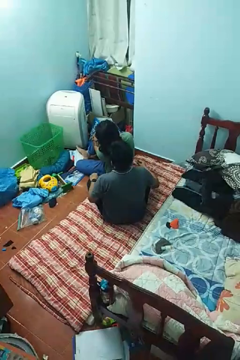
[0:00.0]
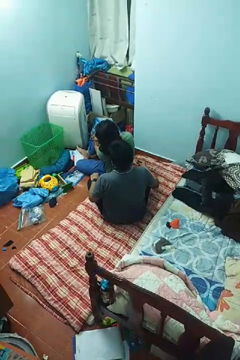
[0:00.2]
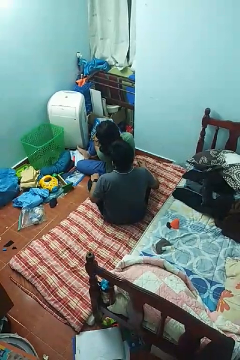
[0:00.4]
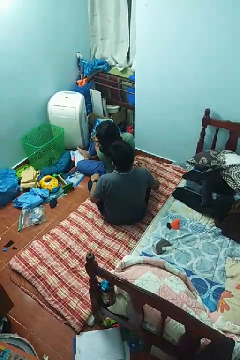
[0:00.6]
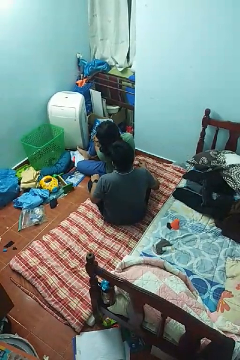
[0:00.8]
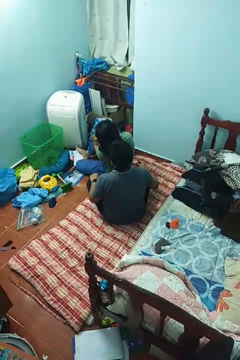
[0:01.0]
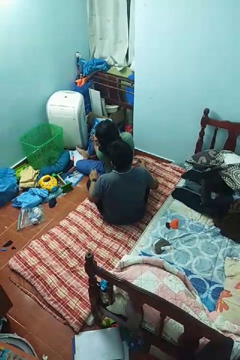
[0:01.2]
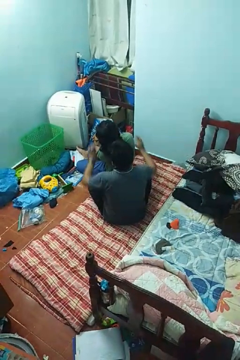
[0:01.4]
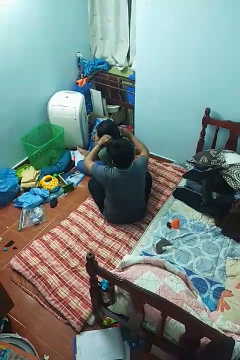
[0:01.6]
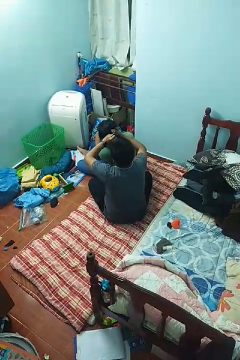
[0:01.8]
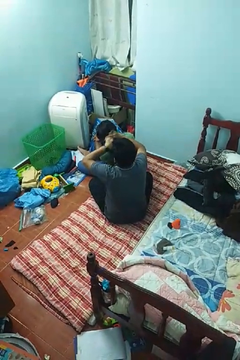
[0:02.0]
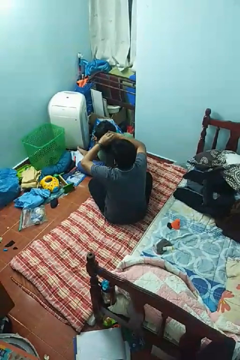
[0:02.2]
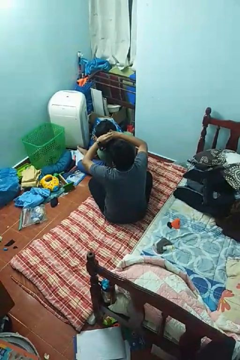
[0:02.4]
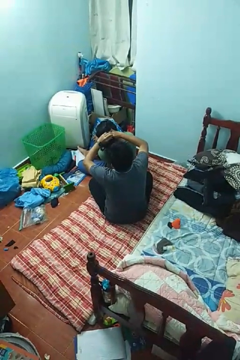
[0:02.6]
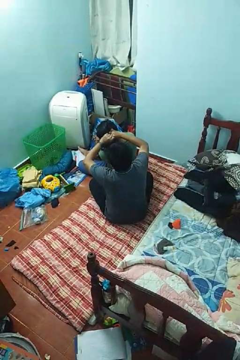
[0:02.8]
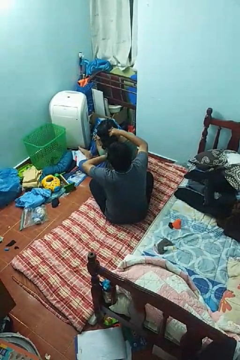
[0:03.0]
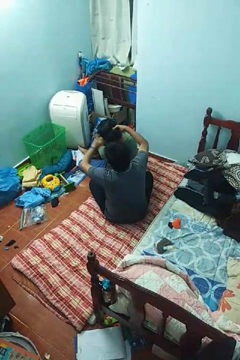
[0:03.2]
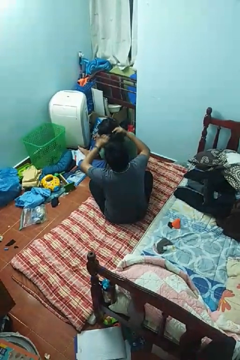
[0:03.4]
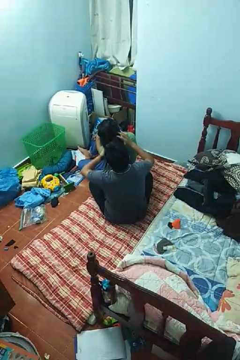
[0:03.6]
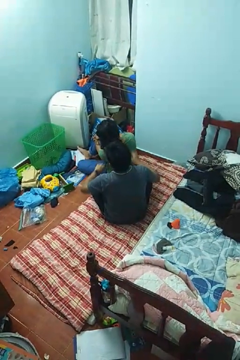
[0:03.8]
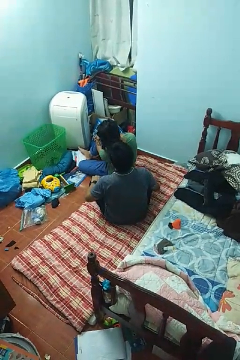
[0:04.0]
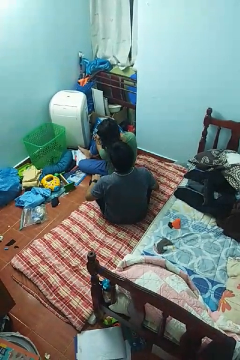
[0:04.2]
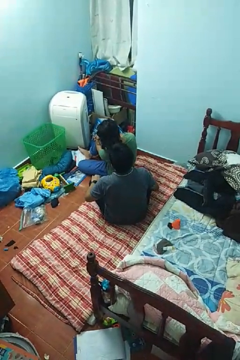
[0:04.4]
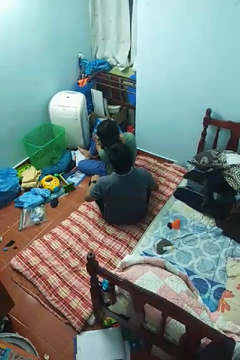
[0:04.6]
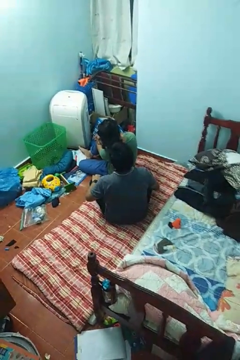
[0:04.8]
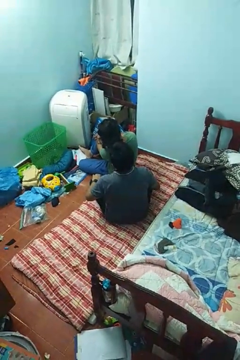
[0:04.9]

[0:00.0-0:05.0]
person braids hair of person

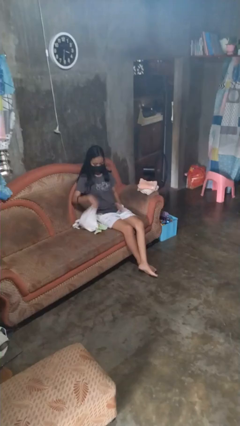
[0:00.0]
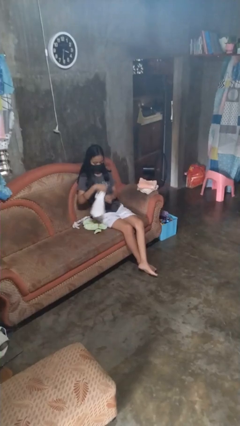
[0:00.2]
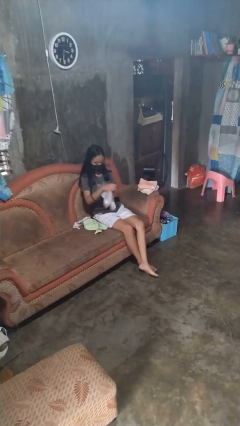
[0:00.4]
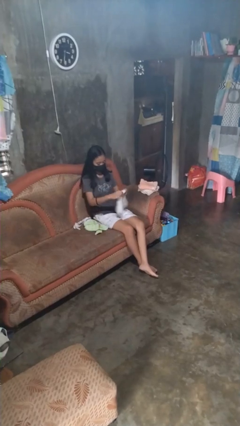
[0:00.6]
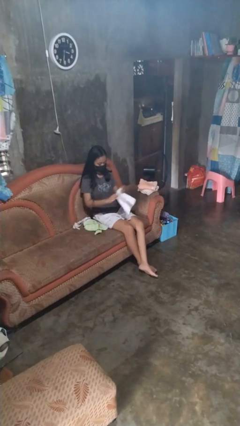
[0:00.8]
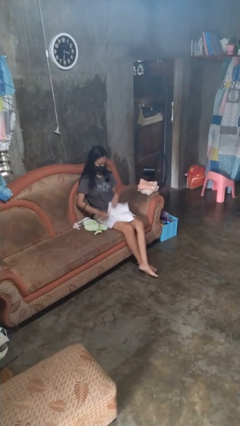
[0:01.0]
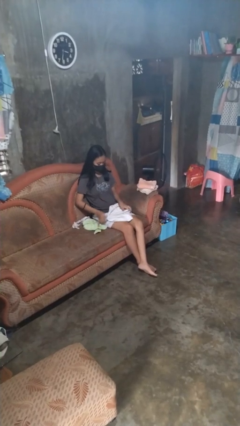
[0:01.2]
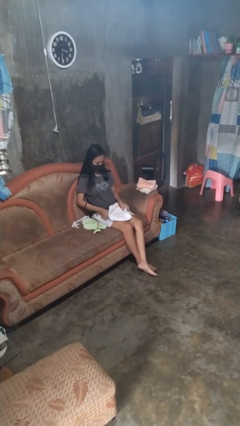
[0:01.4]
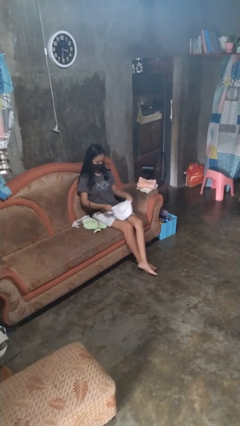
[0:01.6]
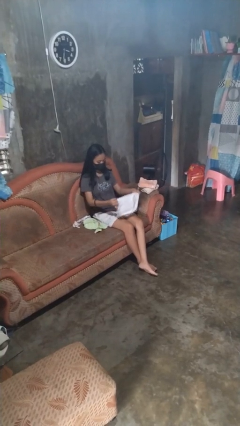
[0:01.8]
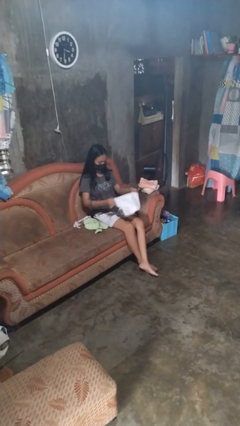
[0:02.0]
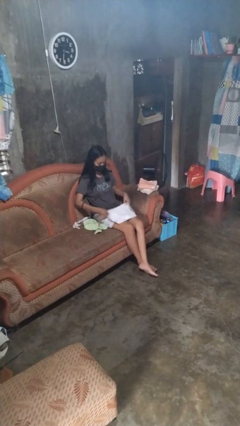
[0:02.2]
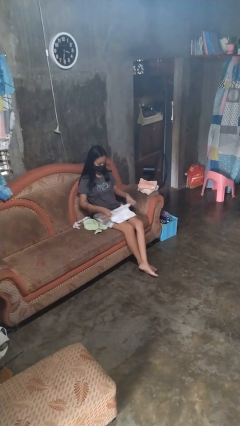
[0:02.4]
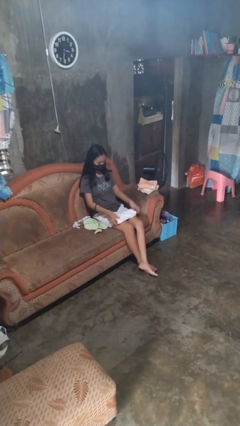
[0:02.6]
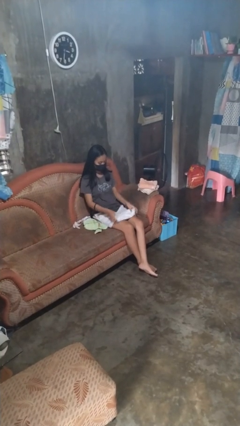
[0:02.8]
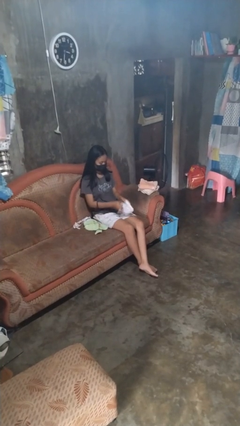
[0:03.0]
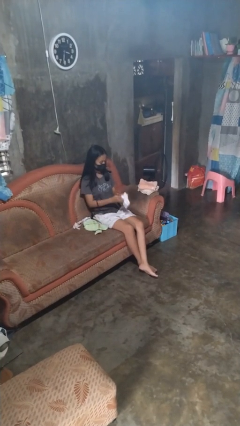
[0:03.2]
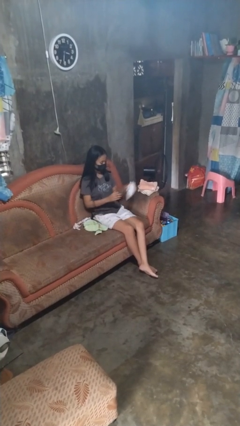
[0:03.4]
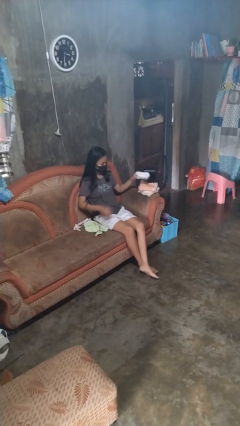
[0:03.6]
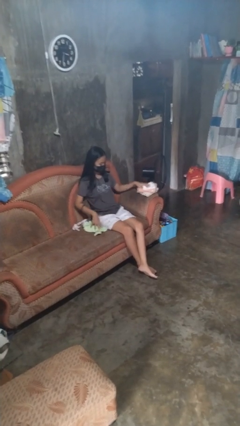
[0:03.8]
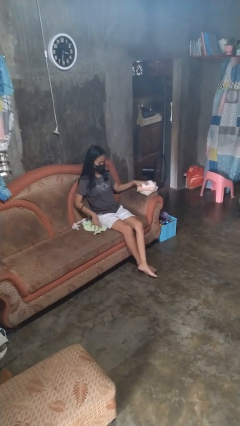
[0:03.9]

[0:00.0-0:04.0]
person folds towel

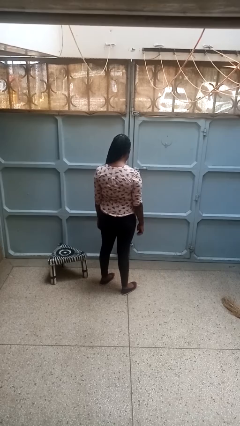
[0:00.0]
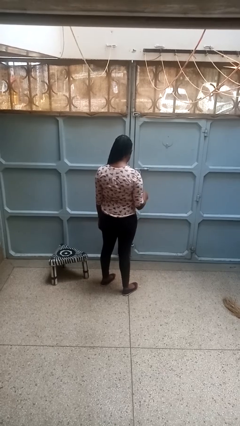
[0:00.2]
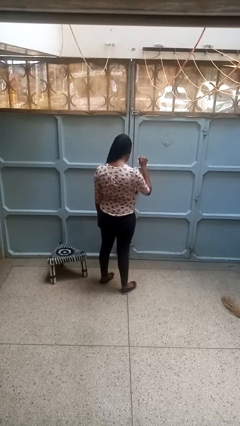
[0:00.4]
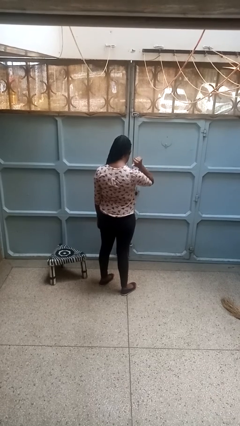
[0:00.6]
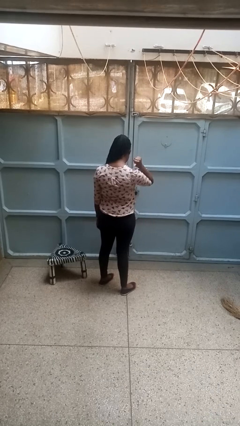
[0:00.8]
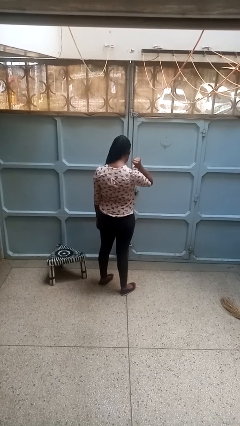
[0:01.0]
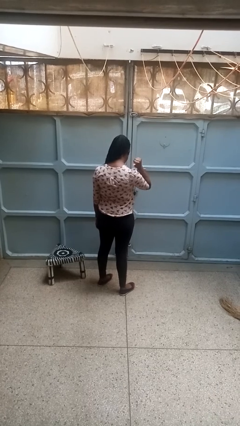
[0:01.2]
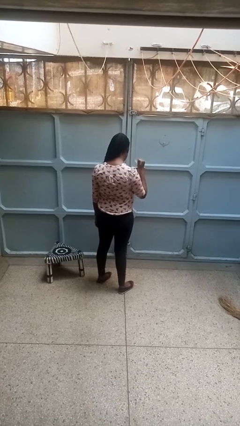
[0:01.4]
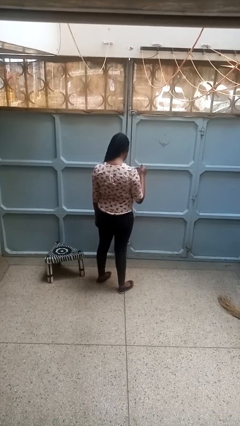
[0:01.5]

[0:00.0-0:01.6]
person gestures behind me

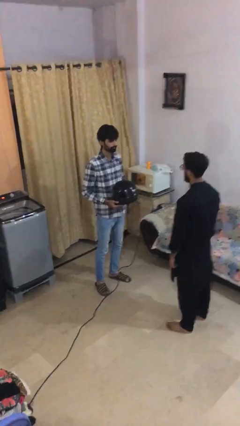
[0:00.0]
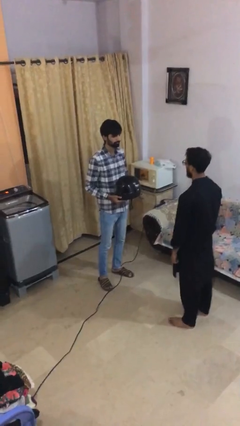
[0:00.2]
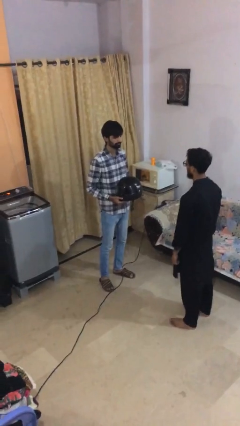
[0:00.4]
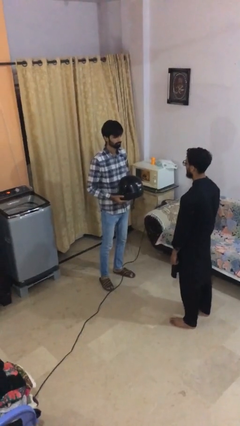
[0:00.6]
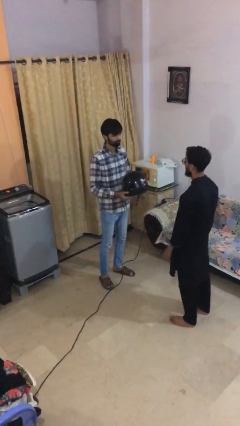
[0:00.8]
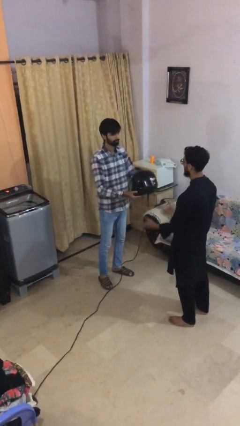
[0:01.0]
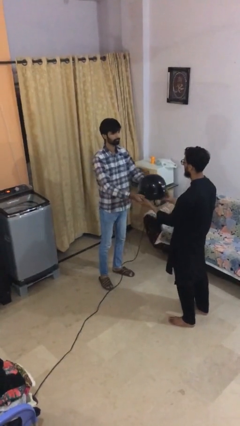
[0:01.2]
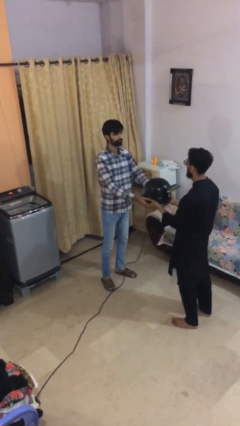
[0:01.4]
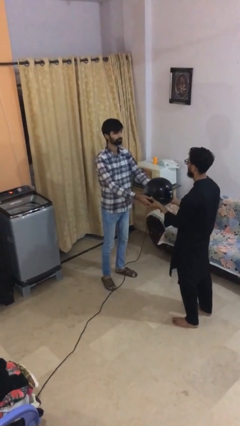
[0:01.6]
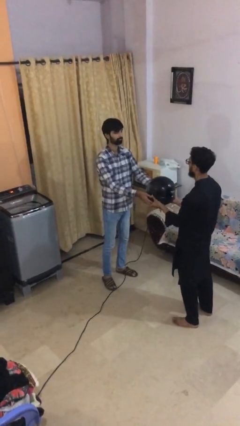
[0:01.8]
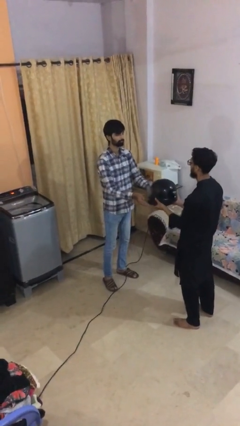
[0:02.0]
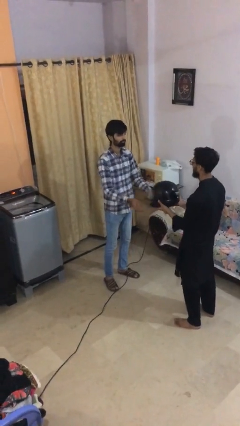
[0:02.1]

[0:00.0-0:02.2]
person transfers object to person

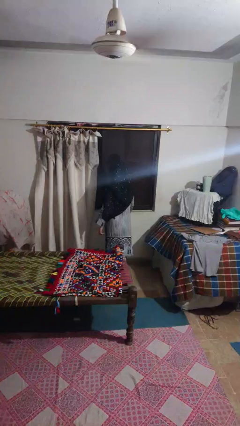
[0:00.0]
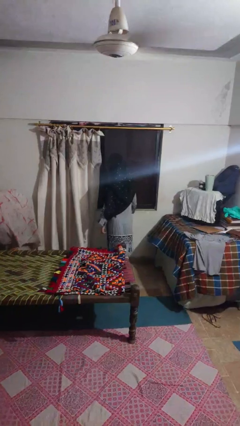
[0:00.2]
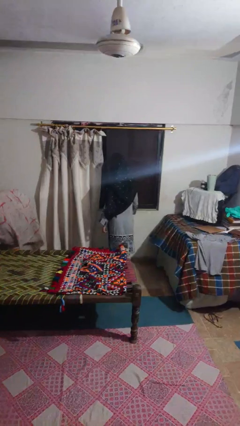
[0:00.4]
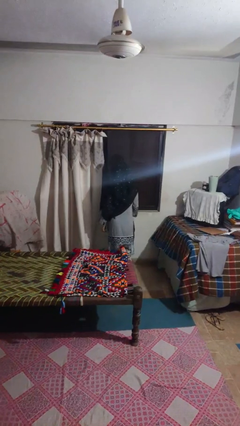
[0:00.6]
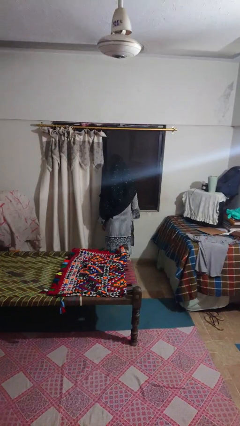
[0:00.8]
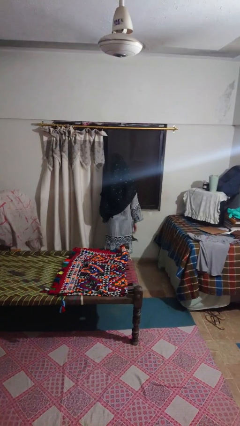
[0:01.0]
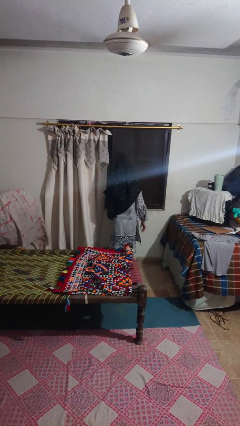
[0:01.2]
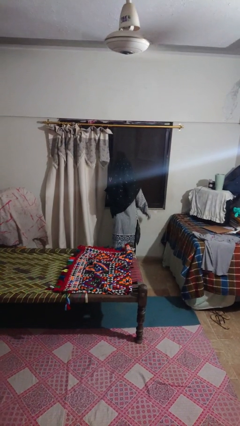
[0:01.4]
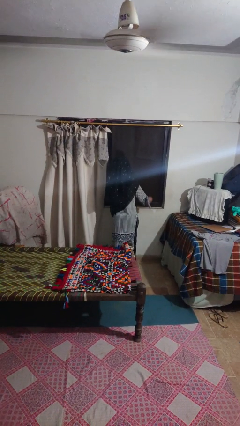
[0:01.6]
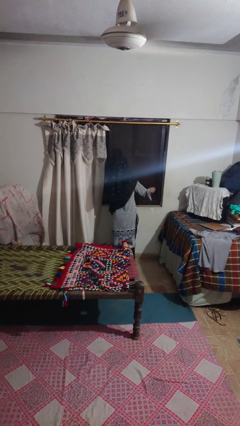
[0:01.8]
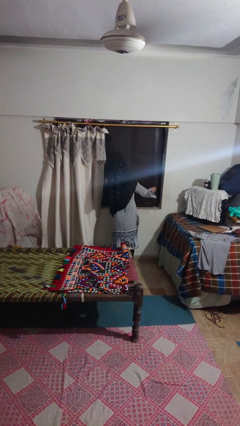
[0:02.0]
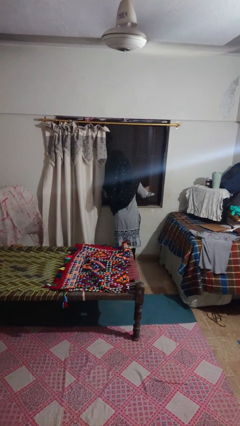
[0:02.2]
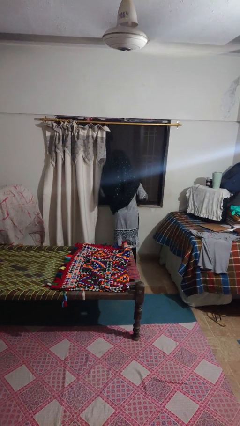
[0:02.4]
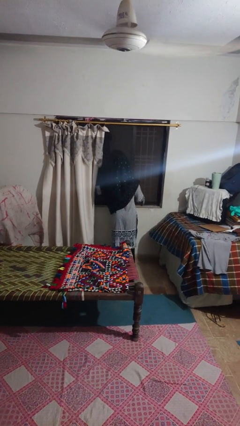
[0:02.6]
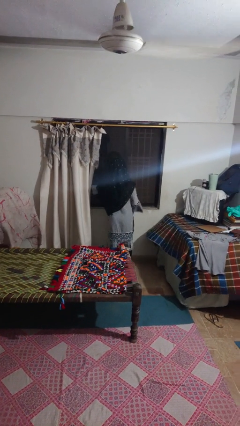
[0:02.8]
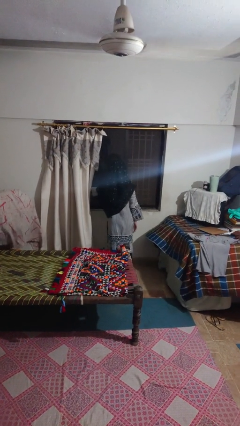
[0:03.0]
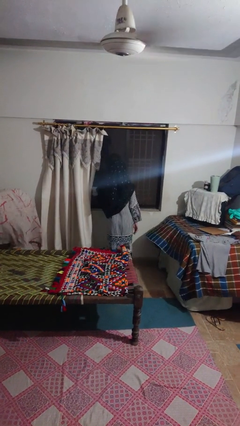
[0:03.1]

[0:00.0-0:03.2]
person opens home window

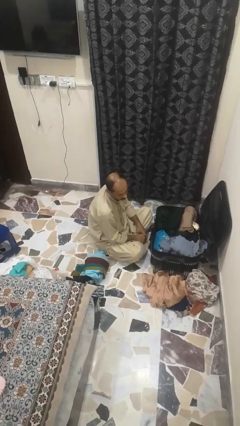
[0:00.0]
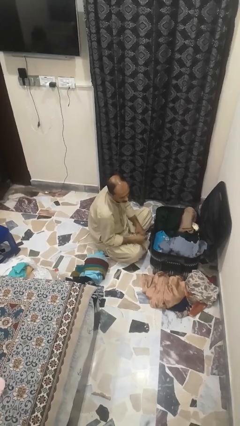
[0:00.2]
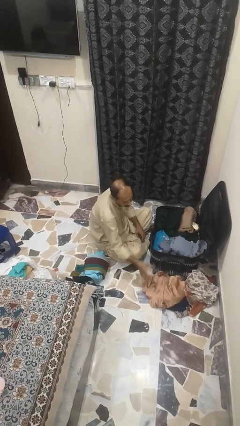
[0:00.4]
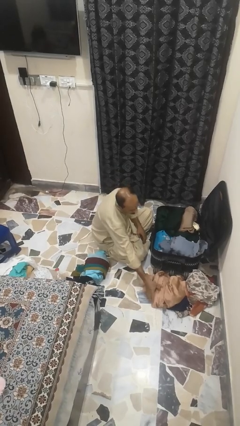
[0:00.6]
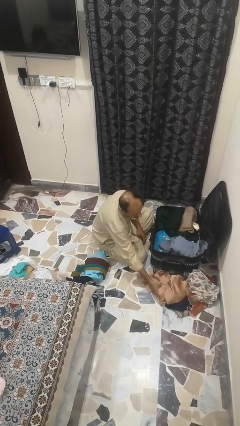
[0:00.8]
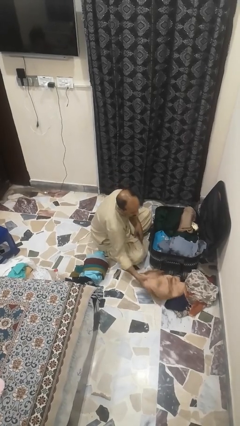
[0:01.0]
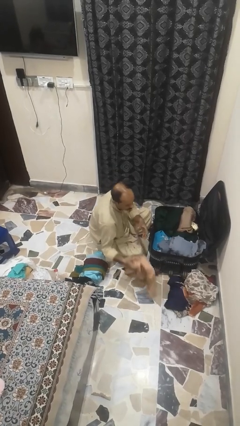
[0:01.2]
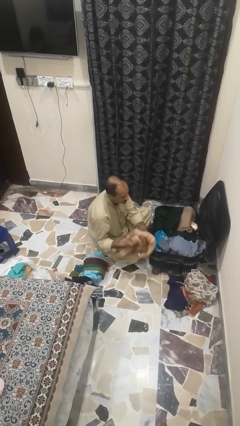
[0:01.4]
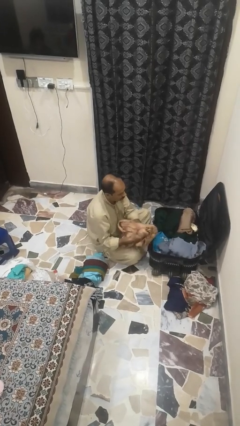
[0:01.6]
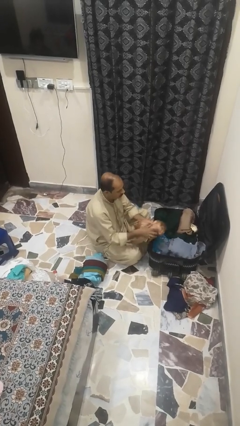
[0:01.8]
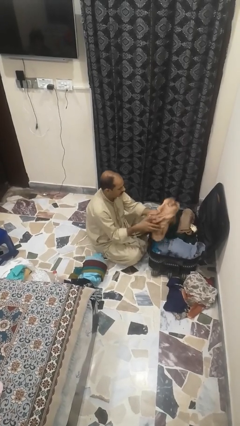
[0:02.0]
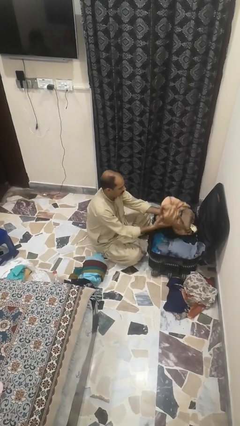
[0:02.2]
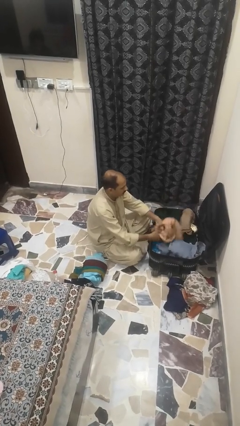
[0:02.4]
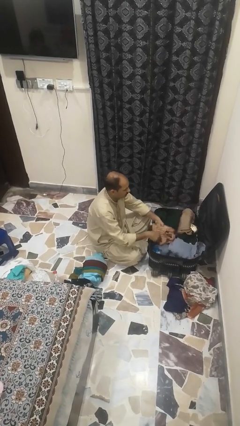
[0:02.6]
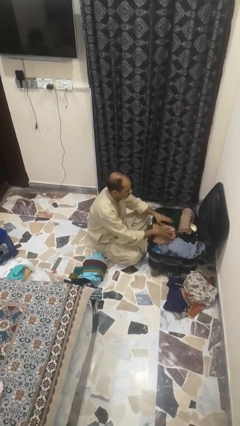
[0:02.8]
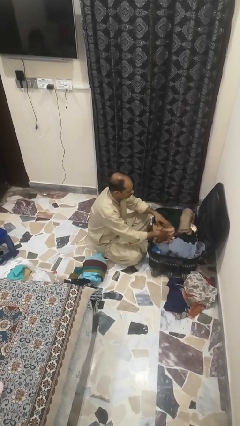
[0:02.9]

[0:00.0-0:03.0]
person loads clothes into suitcase
